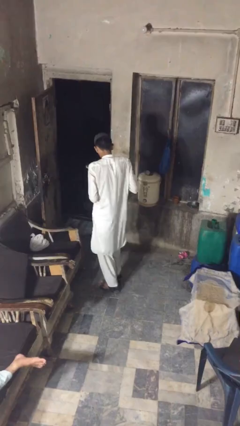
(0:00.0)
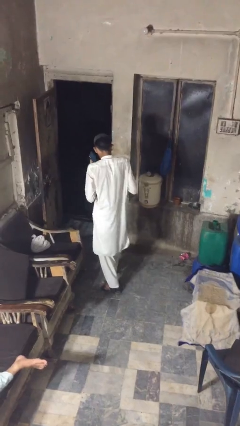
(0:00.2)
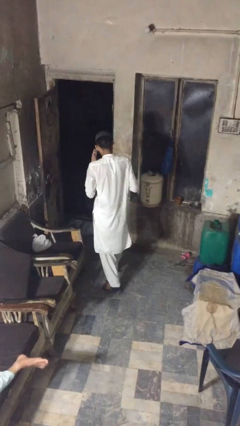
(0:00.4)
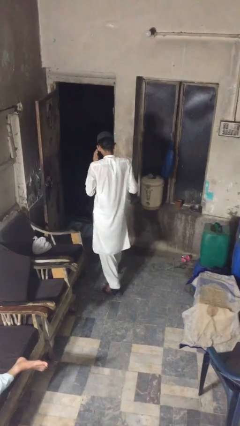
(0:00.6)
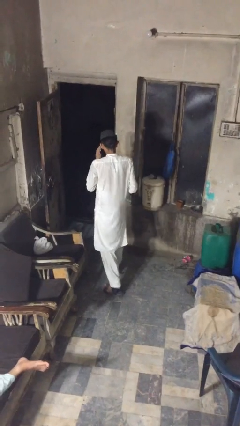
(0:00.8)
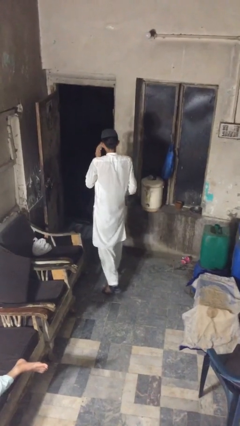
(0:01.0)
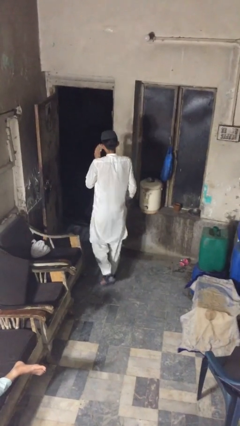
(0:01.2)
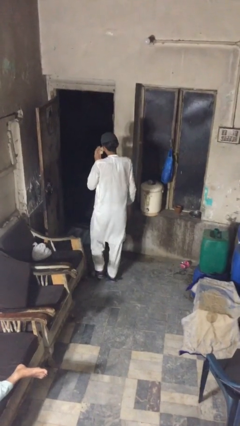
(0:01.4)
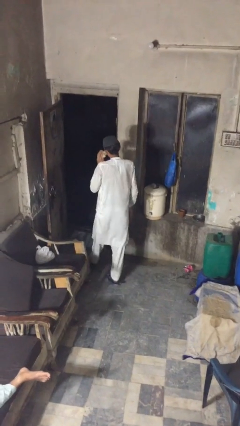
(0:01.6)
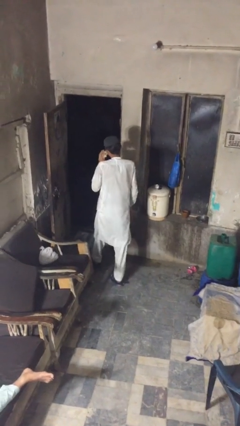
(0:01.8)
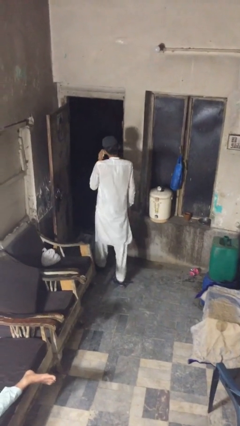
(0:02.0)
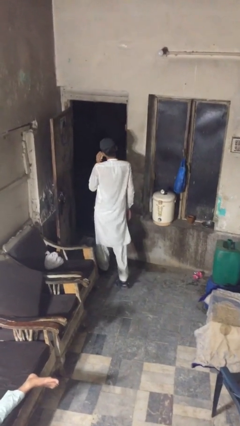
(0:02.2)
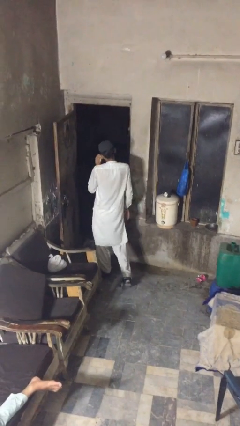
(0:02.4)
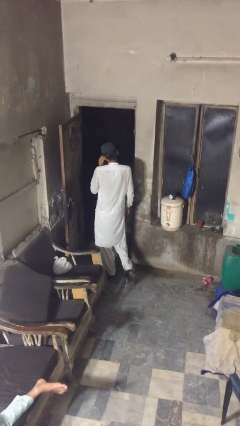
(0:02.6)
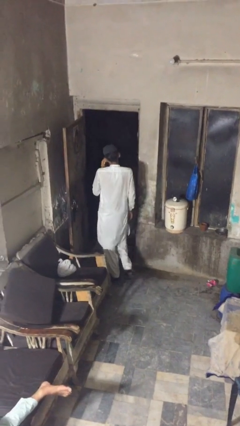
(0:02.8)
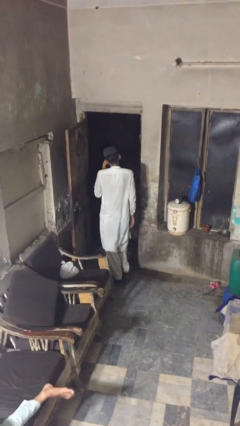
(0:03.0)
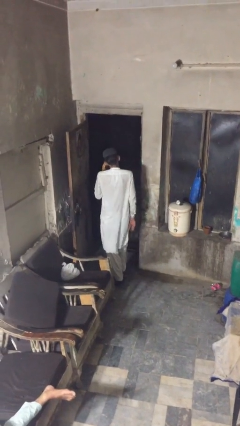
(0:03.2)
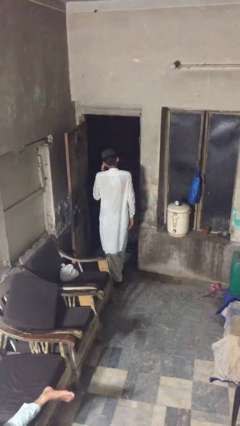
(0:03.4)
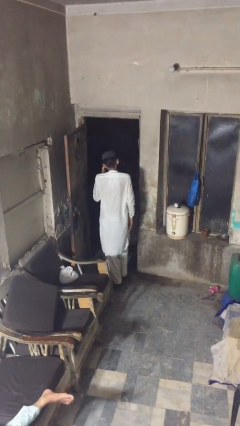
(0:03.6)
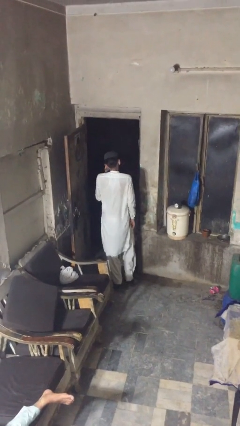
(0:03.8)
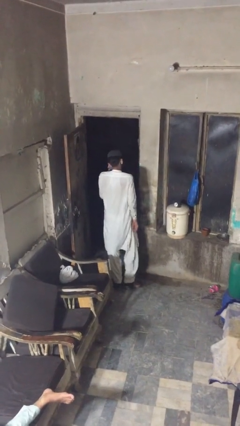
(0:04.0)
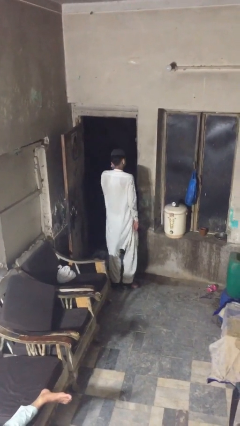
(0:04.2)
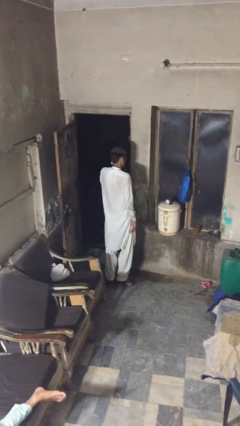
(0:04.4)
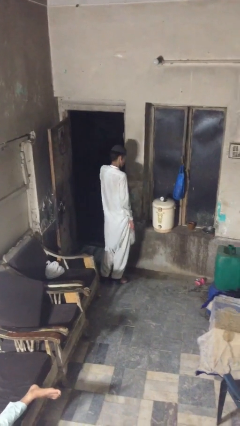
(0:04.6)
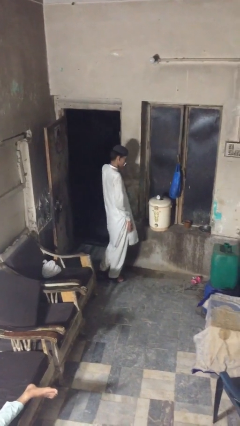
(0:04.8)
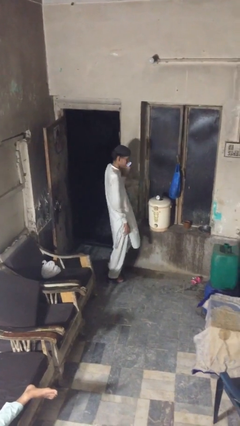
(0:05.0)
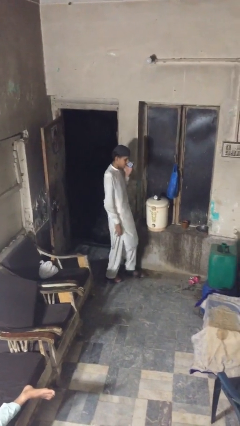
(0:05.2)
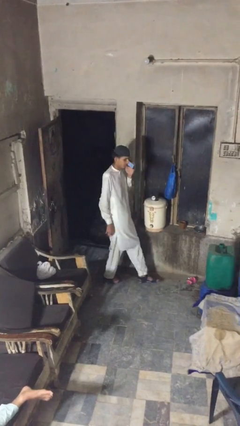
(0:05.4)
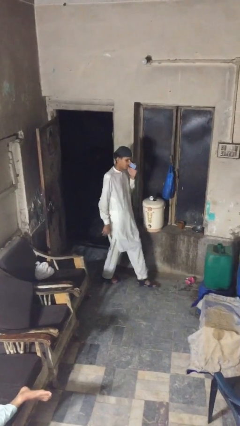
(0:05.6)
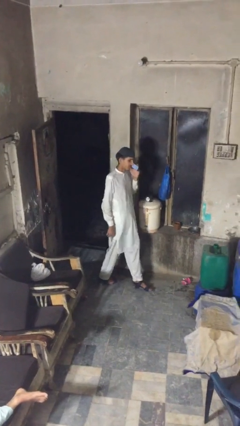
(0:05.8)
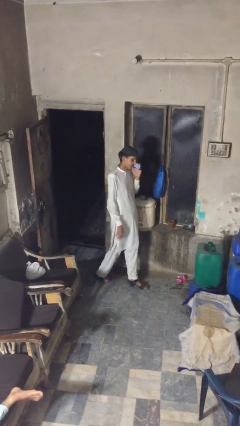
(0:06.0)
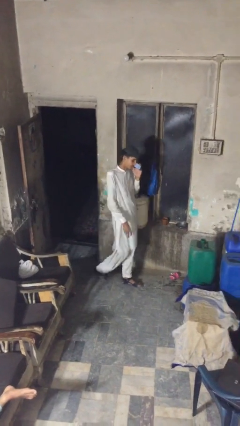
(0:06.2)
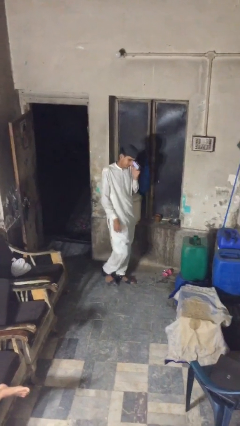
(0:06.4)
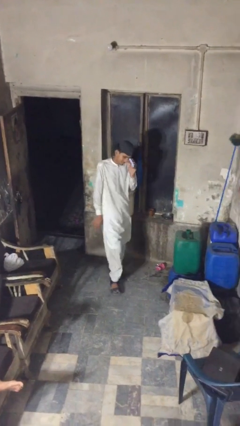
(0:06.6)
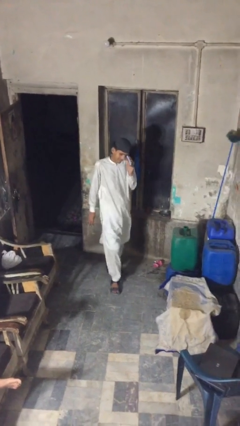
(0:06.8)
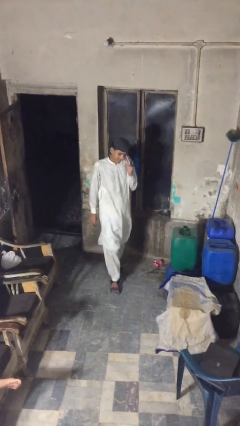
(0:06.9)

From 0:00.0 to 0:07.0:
person talks on phone

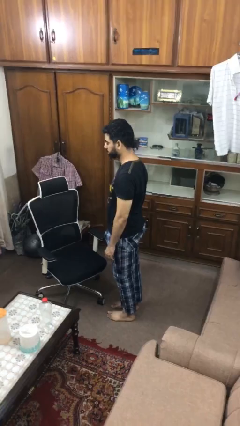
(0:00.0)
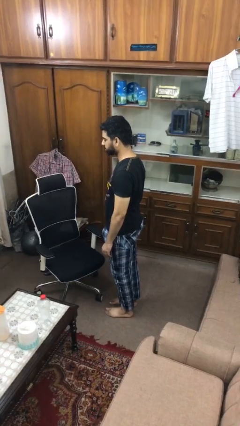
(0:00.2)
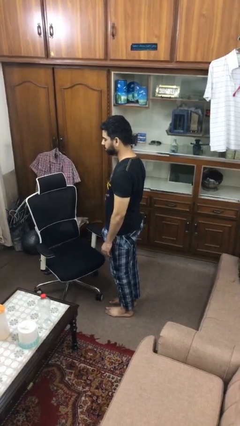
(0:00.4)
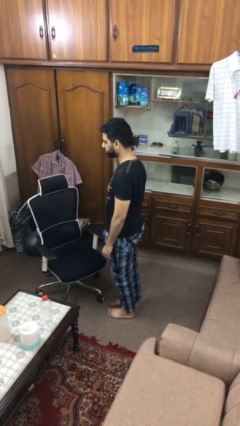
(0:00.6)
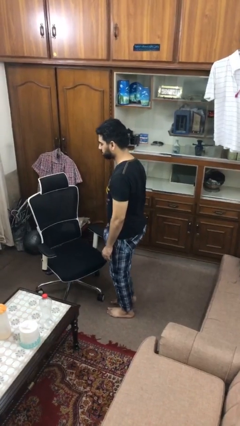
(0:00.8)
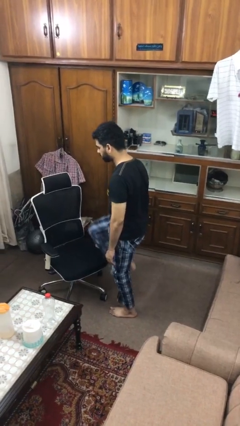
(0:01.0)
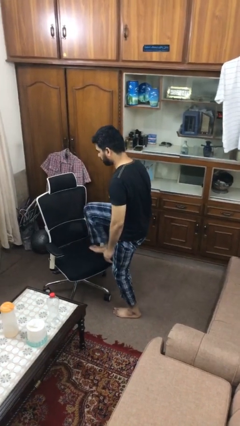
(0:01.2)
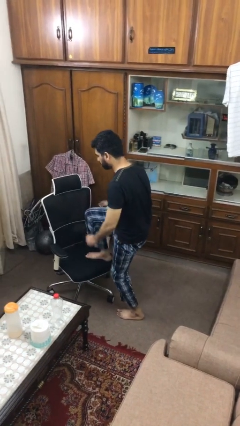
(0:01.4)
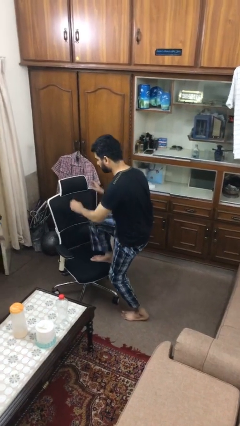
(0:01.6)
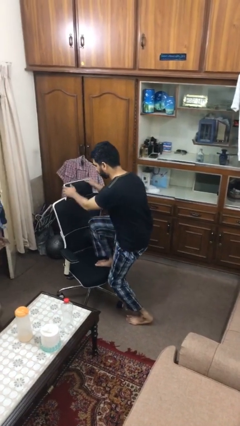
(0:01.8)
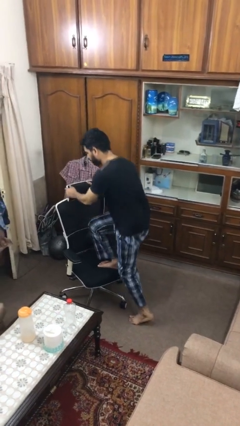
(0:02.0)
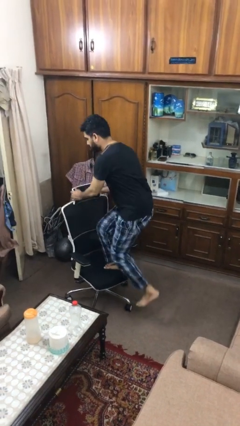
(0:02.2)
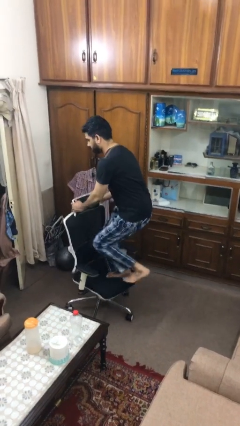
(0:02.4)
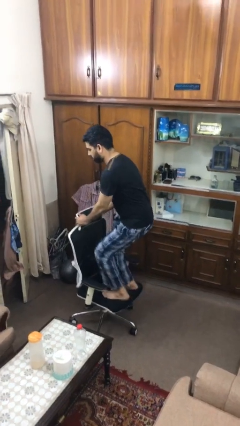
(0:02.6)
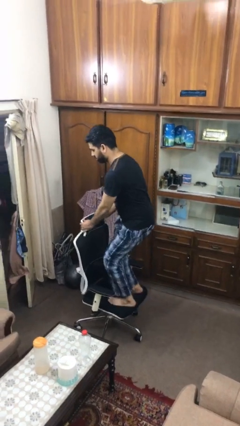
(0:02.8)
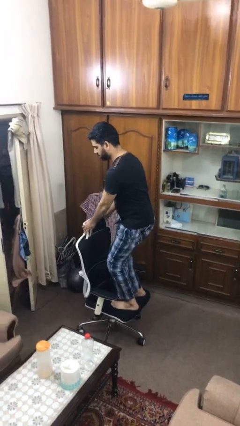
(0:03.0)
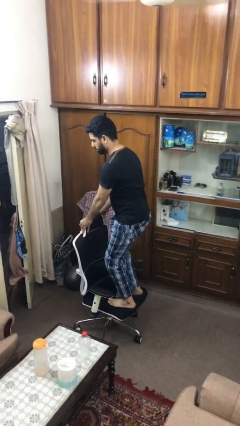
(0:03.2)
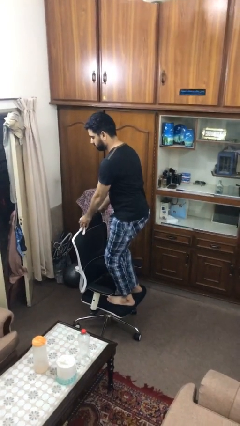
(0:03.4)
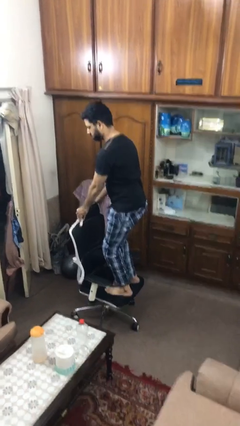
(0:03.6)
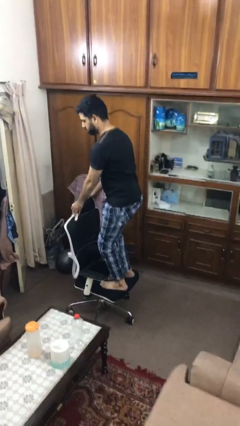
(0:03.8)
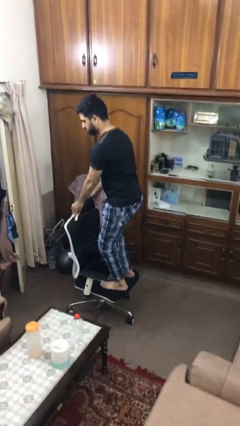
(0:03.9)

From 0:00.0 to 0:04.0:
person climbs on chair

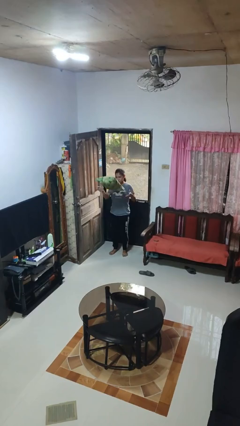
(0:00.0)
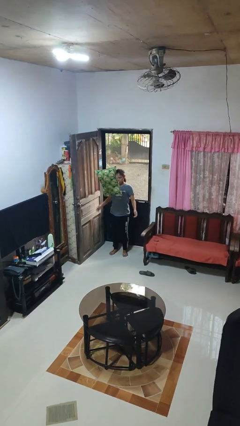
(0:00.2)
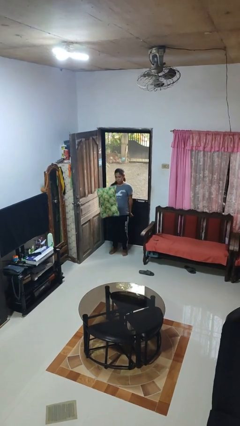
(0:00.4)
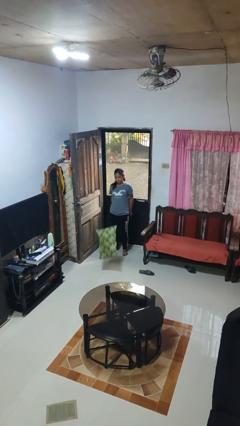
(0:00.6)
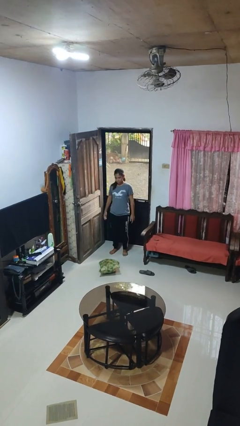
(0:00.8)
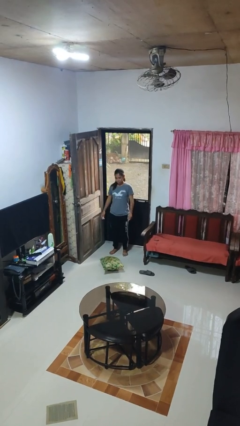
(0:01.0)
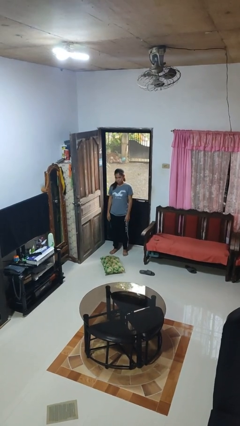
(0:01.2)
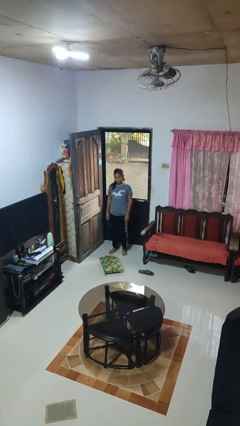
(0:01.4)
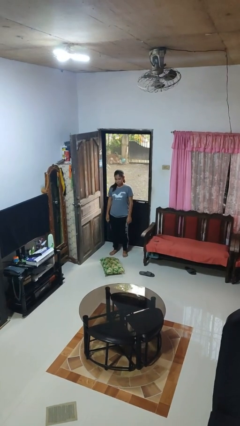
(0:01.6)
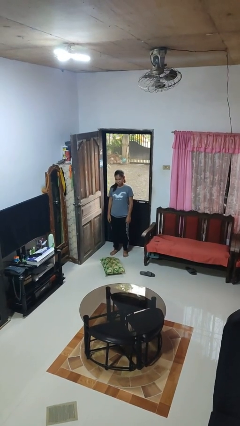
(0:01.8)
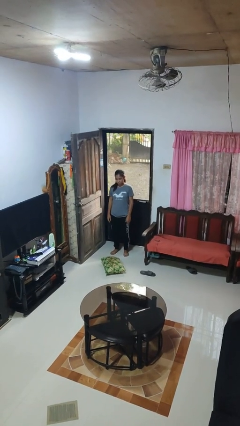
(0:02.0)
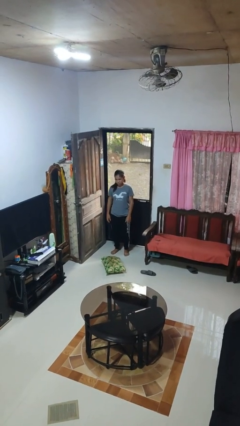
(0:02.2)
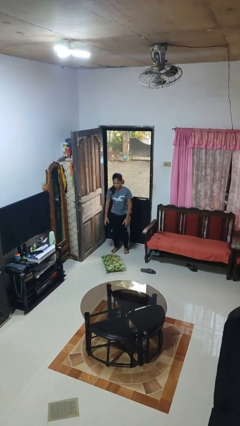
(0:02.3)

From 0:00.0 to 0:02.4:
person throws object into air

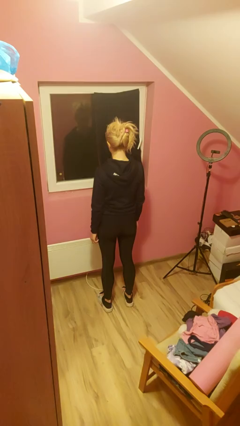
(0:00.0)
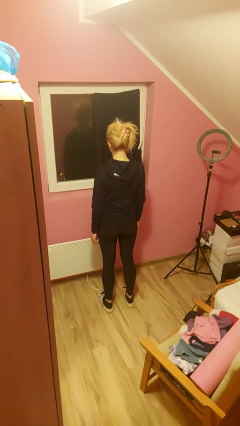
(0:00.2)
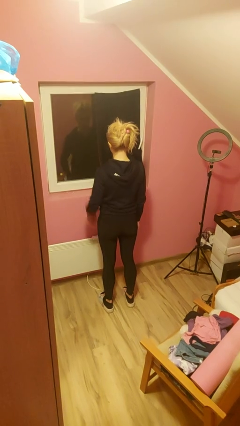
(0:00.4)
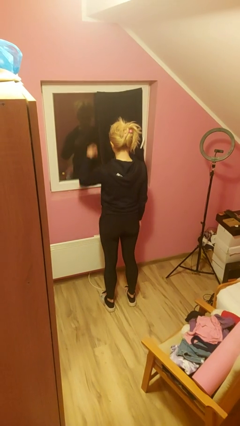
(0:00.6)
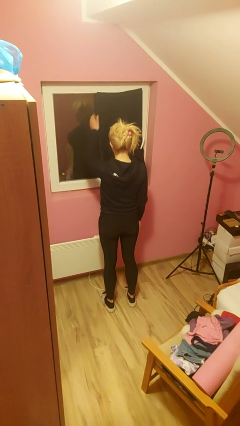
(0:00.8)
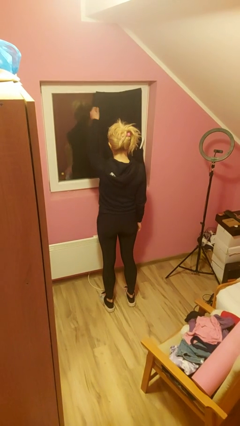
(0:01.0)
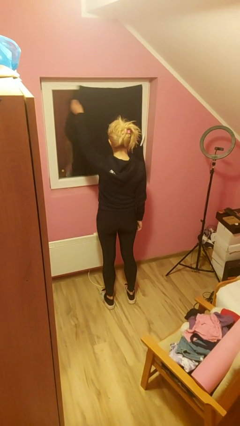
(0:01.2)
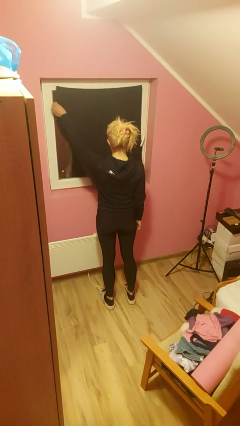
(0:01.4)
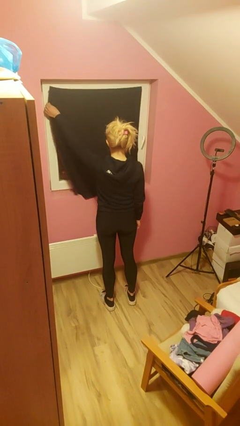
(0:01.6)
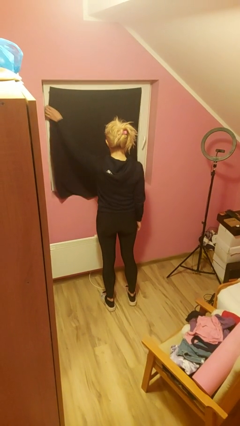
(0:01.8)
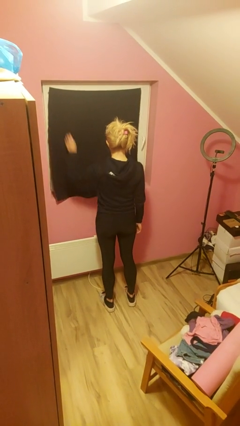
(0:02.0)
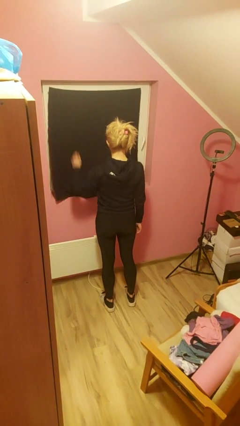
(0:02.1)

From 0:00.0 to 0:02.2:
person closes curtains

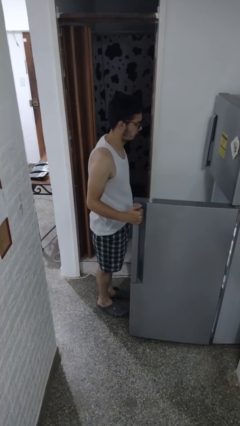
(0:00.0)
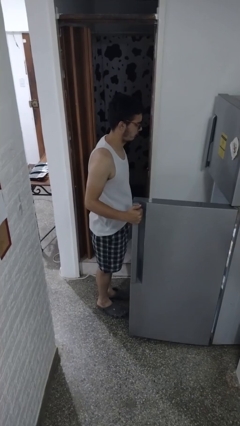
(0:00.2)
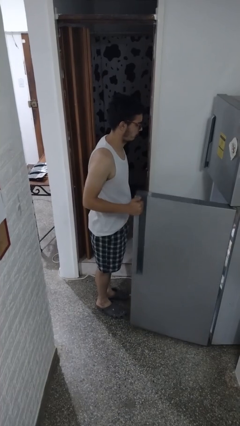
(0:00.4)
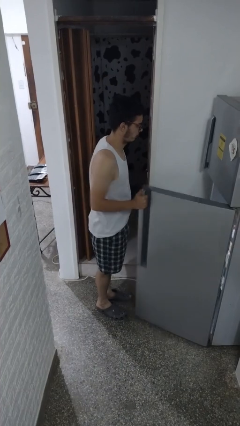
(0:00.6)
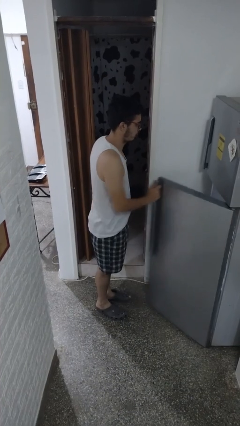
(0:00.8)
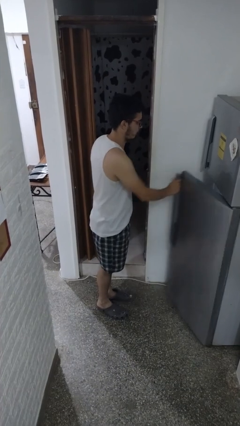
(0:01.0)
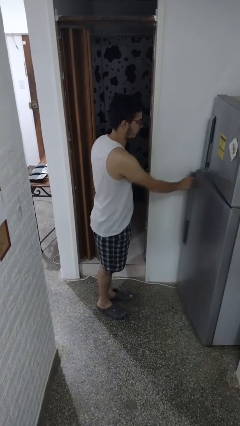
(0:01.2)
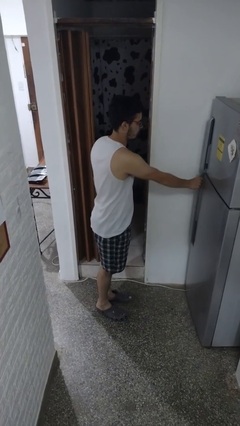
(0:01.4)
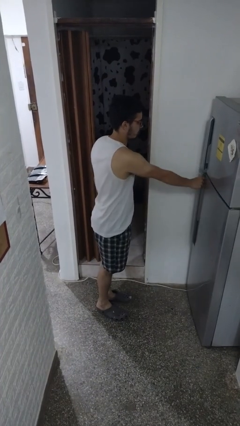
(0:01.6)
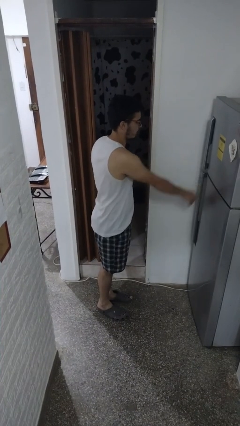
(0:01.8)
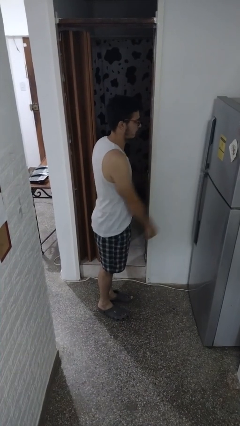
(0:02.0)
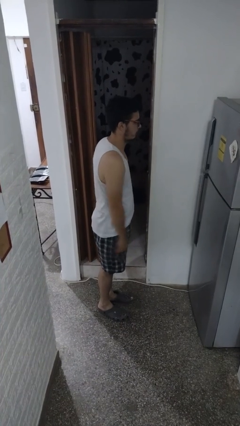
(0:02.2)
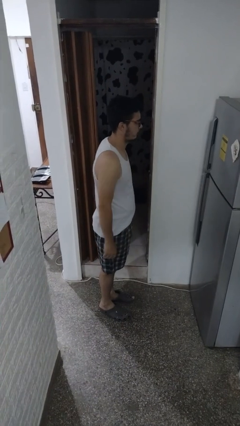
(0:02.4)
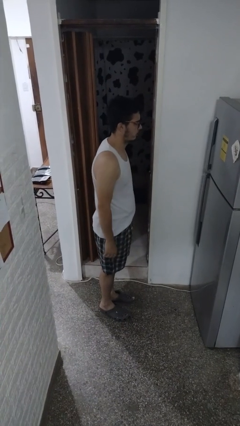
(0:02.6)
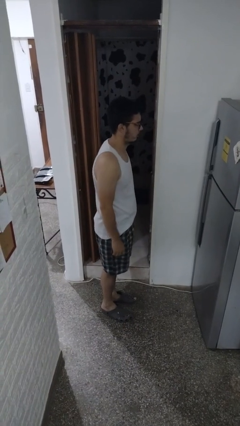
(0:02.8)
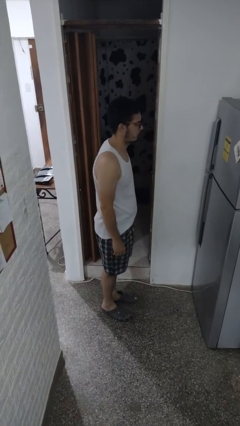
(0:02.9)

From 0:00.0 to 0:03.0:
person closes refrigerator
